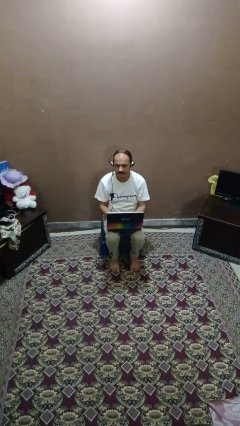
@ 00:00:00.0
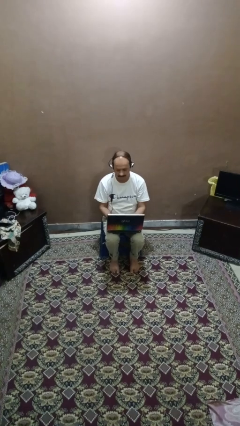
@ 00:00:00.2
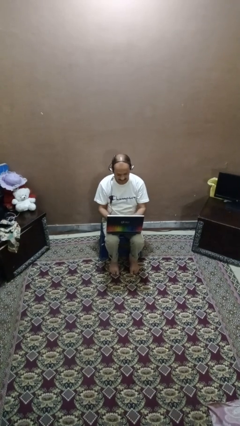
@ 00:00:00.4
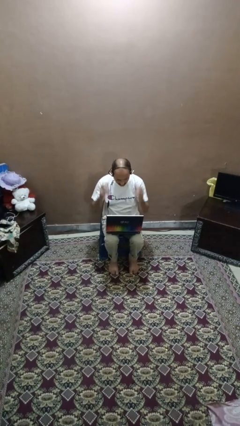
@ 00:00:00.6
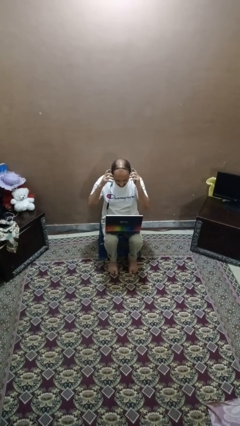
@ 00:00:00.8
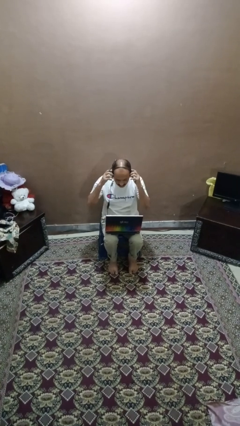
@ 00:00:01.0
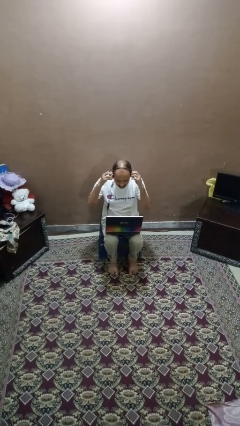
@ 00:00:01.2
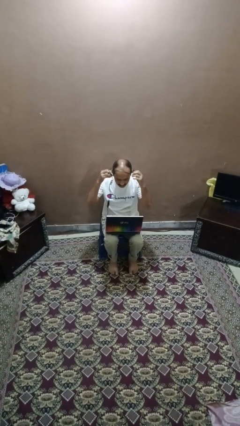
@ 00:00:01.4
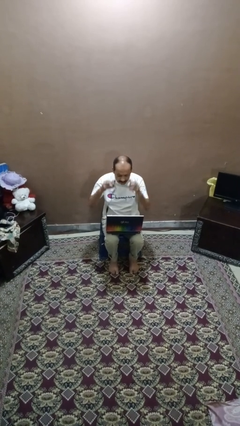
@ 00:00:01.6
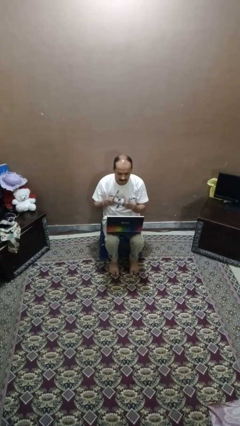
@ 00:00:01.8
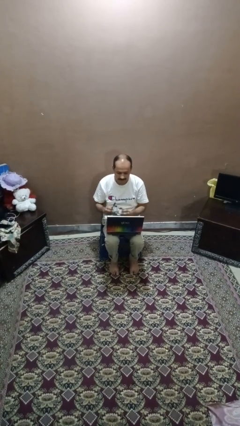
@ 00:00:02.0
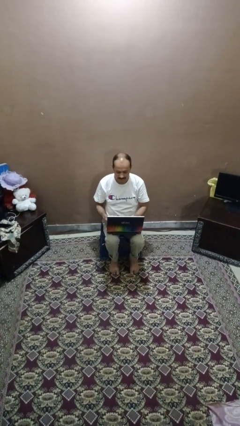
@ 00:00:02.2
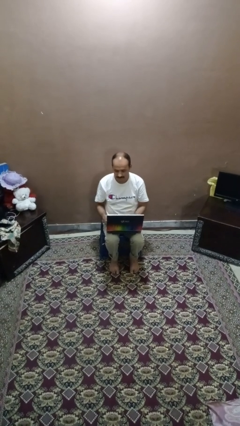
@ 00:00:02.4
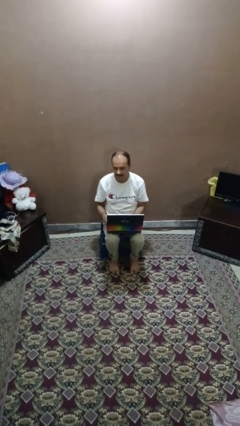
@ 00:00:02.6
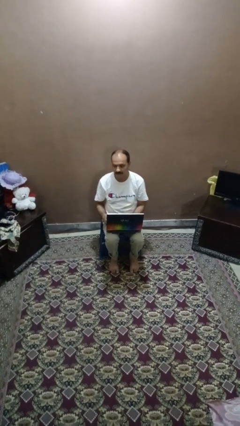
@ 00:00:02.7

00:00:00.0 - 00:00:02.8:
person takes off headphones

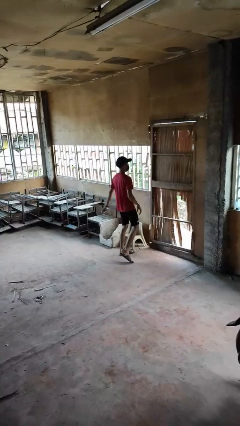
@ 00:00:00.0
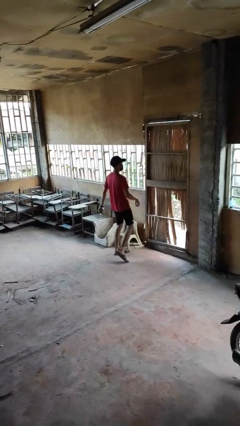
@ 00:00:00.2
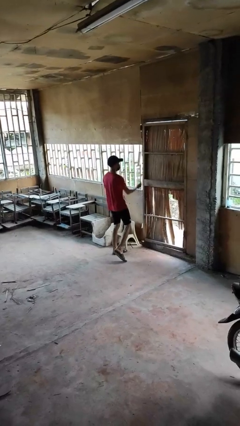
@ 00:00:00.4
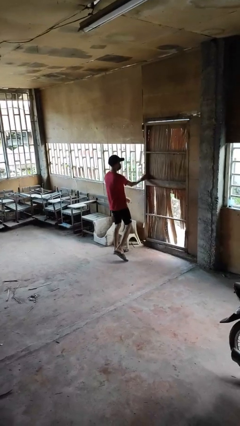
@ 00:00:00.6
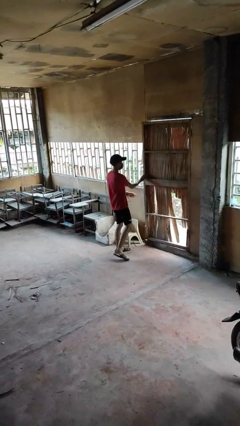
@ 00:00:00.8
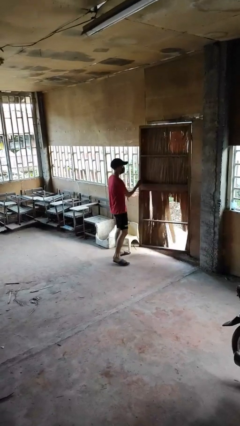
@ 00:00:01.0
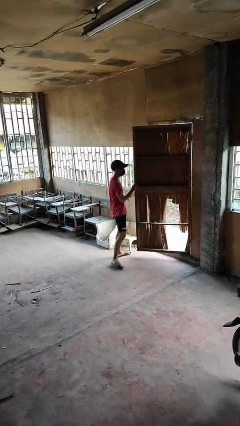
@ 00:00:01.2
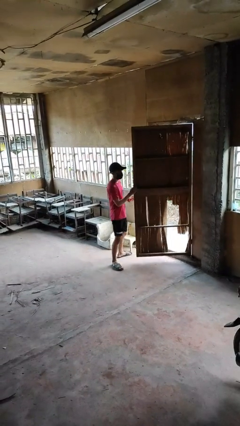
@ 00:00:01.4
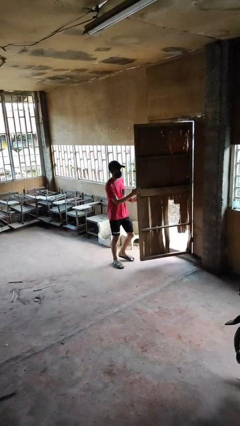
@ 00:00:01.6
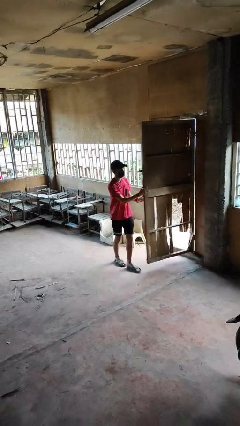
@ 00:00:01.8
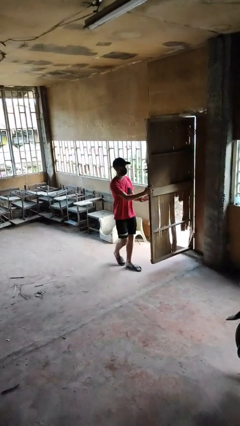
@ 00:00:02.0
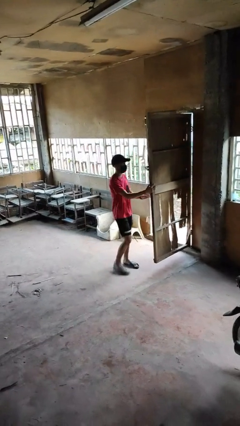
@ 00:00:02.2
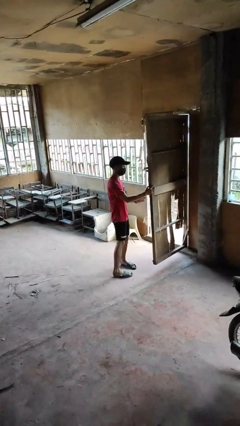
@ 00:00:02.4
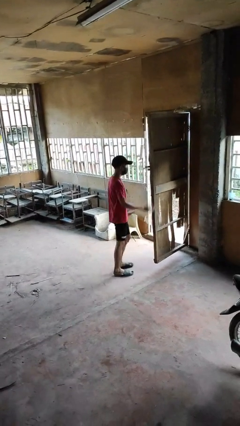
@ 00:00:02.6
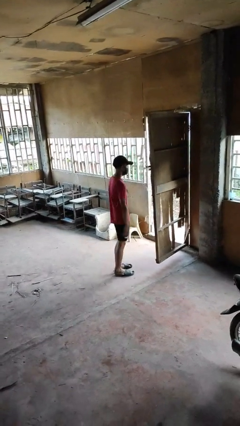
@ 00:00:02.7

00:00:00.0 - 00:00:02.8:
person opens facility door

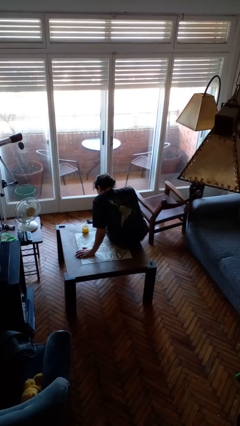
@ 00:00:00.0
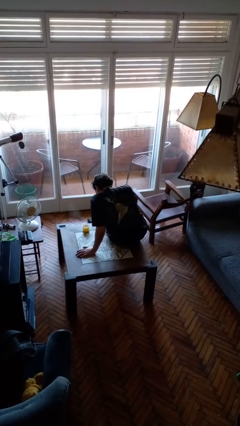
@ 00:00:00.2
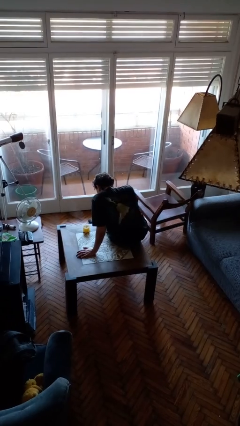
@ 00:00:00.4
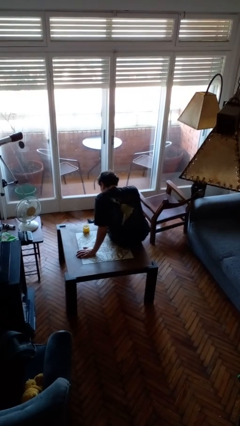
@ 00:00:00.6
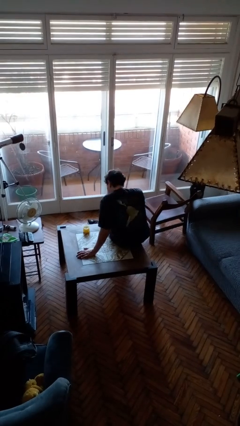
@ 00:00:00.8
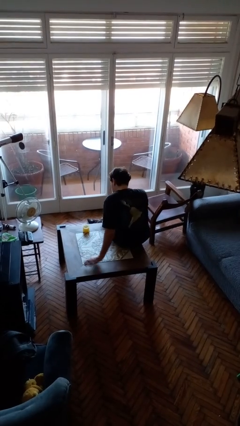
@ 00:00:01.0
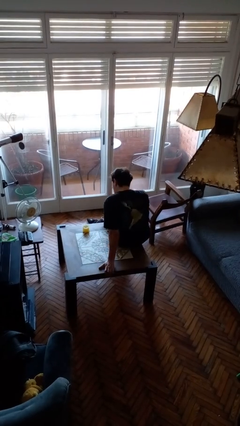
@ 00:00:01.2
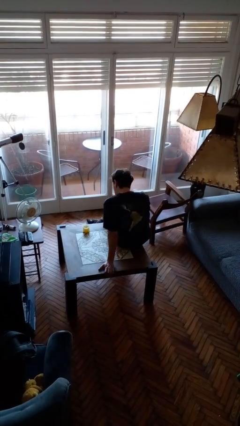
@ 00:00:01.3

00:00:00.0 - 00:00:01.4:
person extinguishes candle

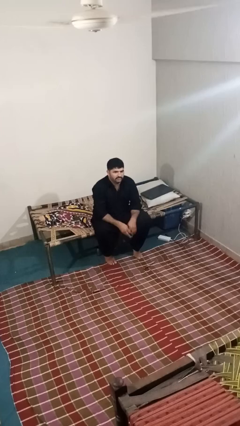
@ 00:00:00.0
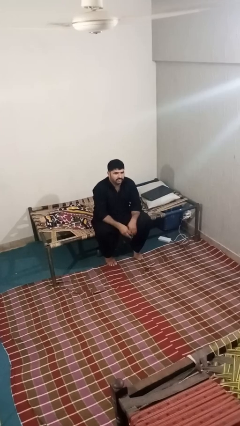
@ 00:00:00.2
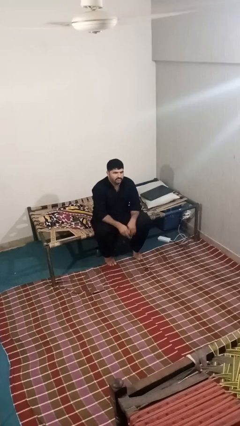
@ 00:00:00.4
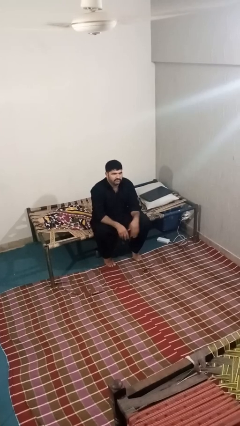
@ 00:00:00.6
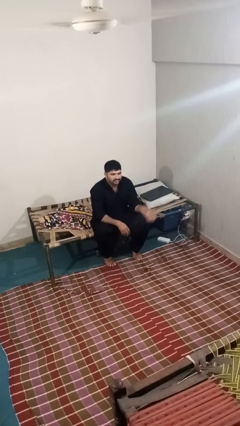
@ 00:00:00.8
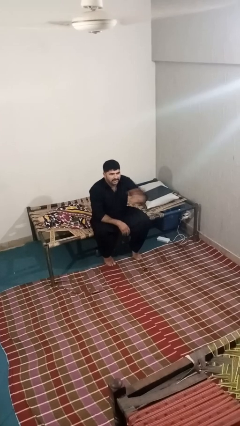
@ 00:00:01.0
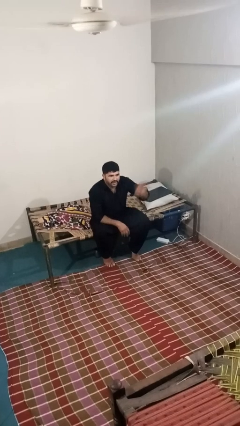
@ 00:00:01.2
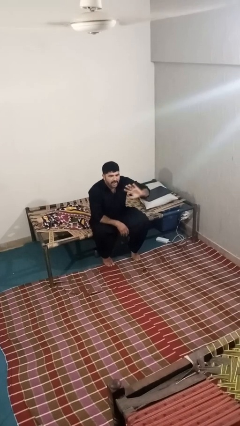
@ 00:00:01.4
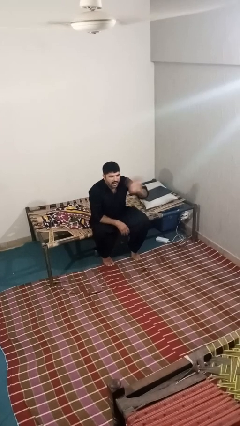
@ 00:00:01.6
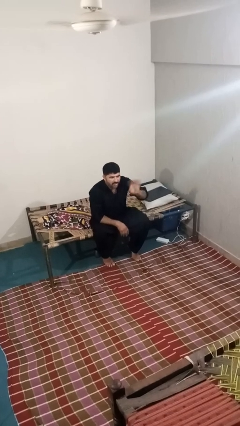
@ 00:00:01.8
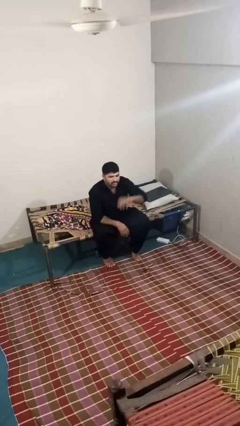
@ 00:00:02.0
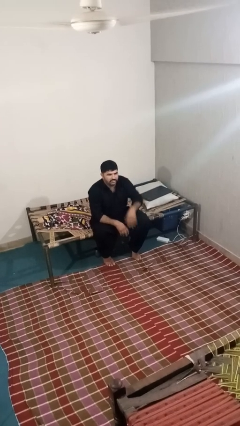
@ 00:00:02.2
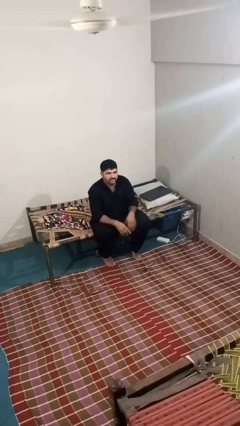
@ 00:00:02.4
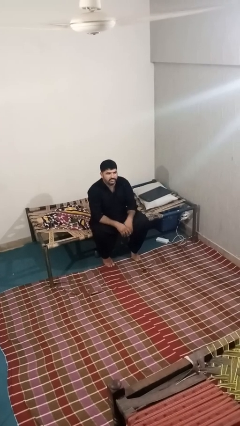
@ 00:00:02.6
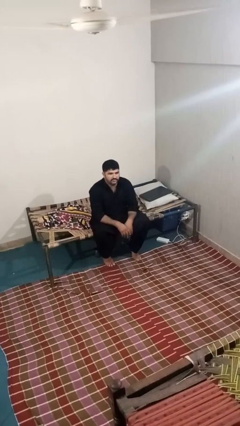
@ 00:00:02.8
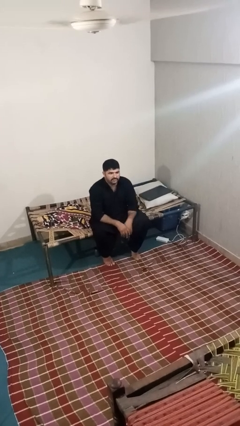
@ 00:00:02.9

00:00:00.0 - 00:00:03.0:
person waves at person

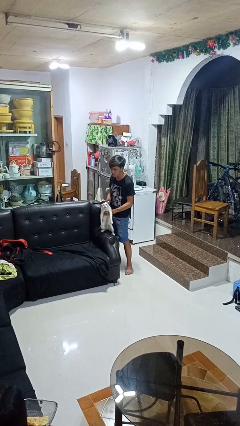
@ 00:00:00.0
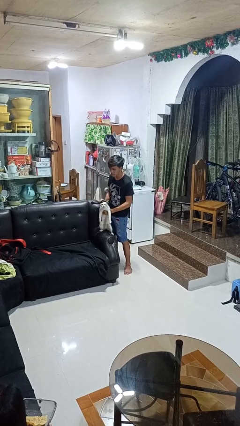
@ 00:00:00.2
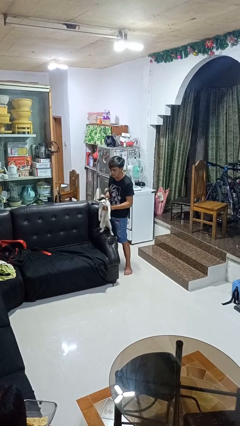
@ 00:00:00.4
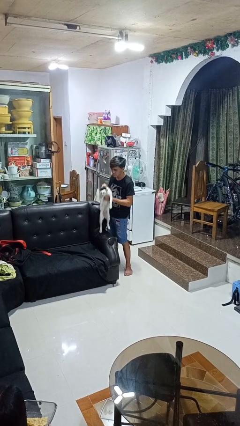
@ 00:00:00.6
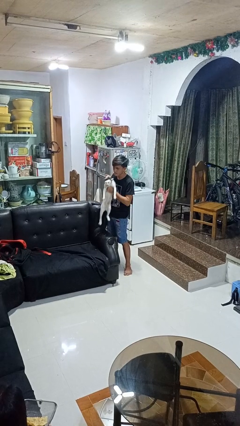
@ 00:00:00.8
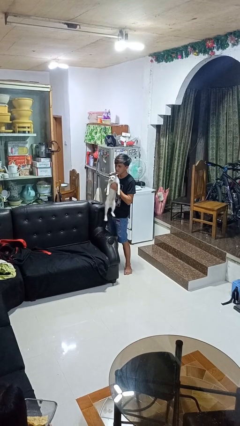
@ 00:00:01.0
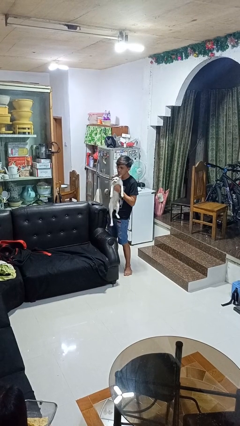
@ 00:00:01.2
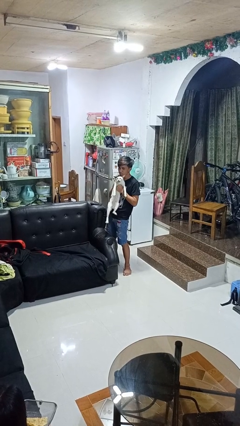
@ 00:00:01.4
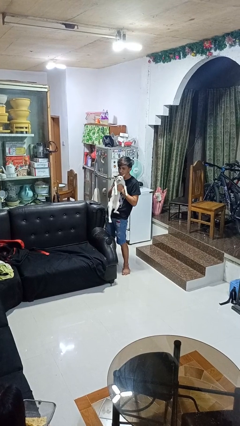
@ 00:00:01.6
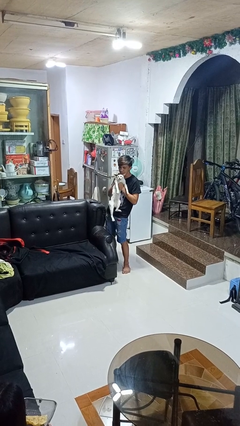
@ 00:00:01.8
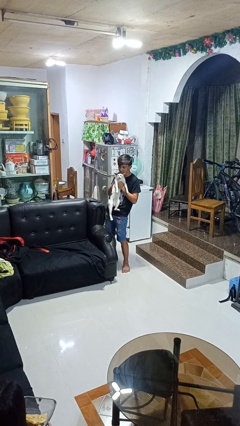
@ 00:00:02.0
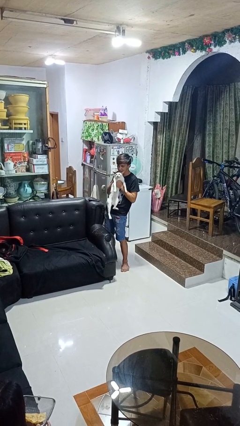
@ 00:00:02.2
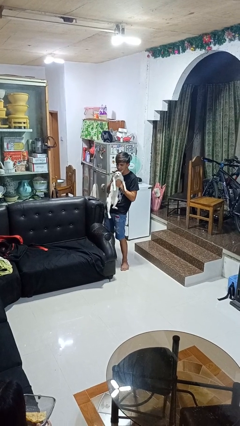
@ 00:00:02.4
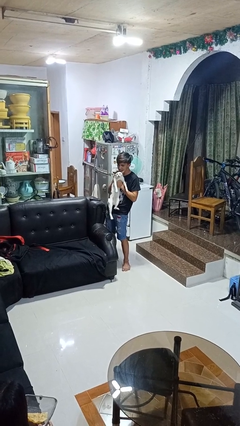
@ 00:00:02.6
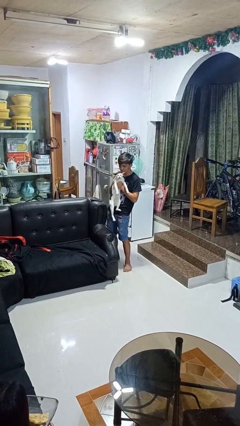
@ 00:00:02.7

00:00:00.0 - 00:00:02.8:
person hugs cat

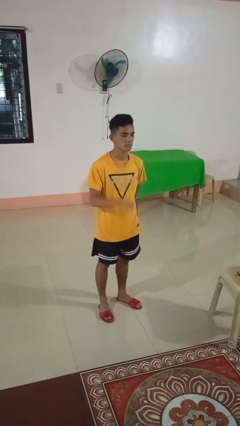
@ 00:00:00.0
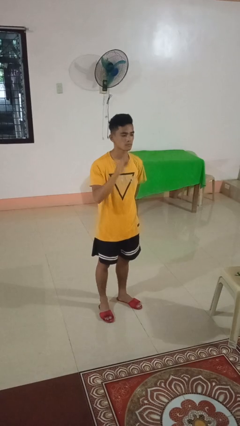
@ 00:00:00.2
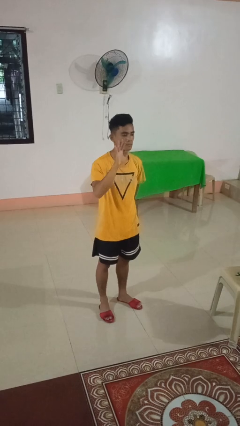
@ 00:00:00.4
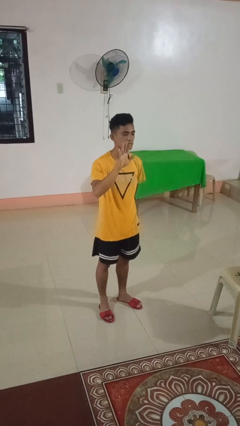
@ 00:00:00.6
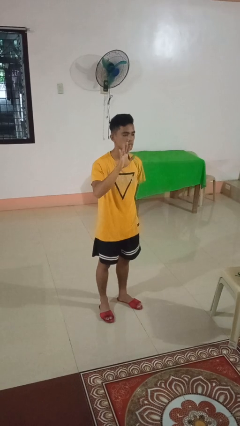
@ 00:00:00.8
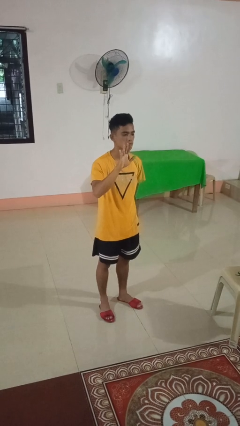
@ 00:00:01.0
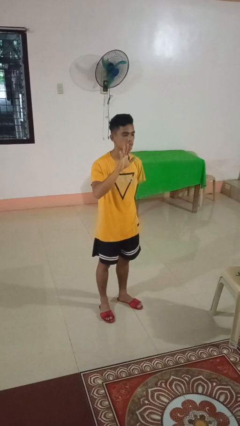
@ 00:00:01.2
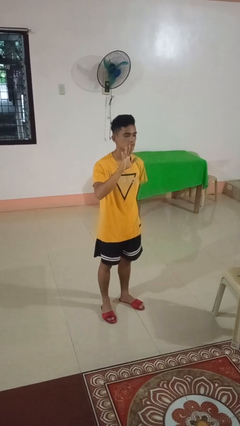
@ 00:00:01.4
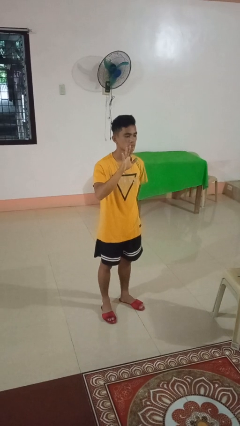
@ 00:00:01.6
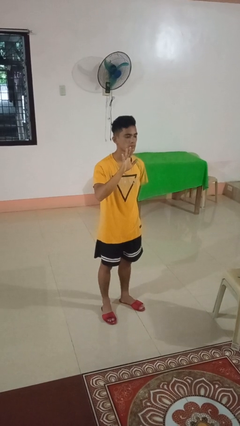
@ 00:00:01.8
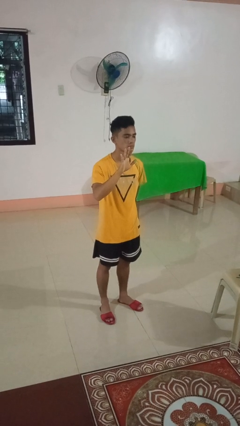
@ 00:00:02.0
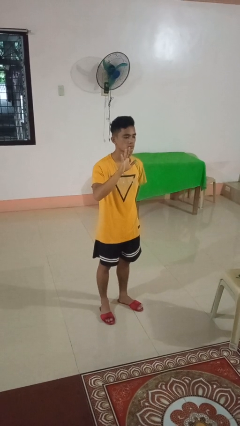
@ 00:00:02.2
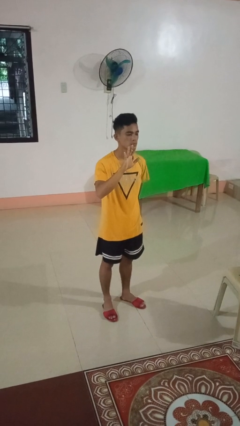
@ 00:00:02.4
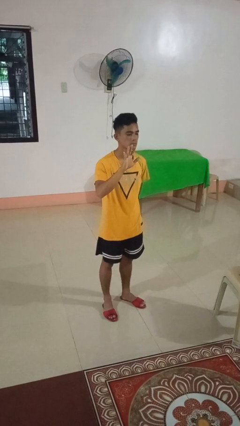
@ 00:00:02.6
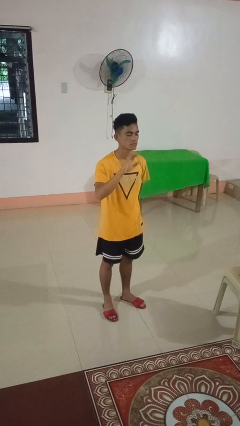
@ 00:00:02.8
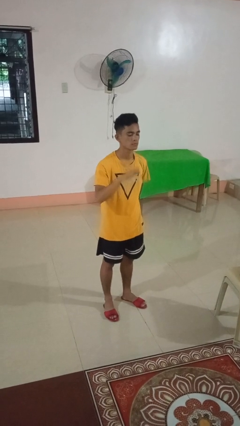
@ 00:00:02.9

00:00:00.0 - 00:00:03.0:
person gestures number five

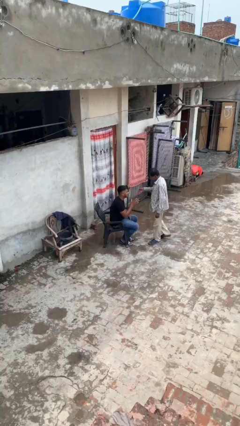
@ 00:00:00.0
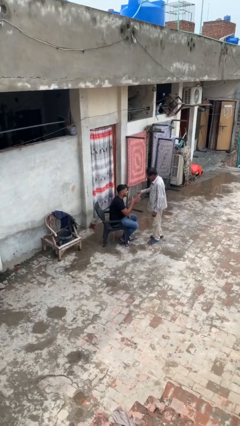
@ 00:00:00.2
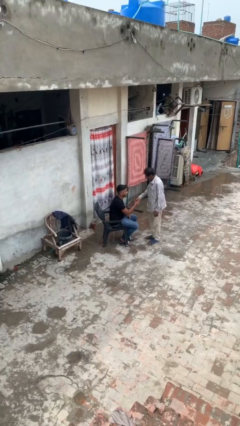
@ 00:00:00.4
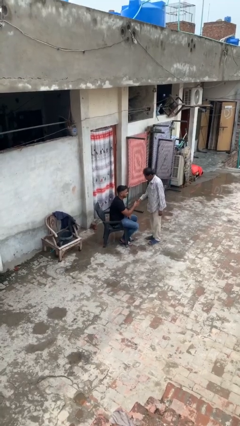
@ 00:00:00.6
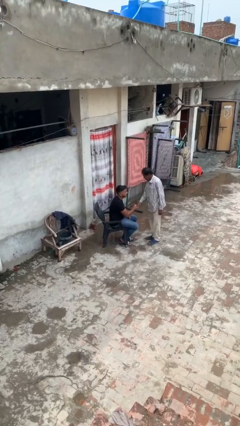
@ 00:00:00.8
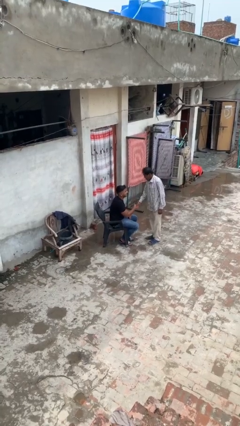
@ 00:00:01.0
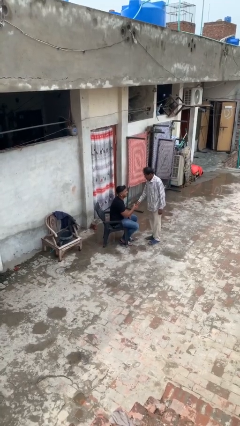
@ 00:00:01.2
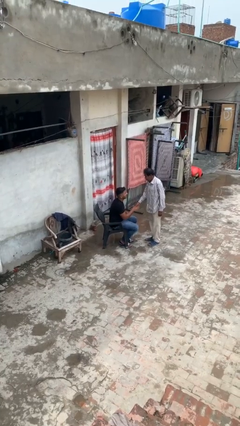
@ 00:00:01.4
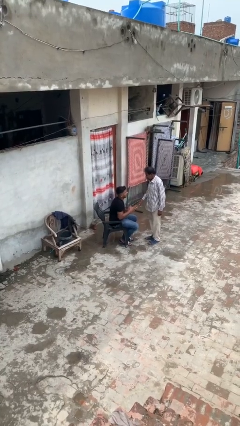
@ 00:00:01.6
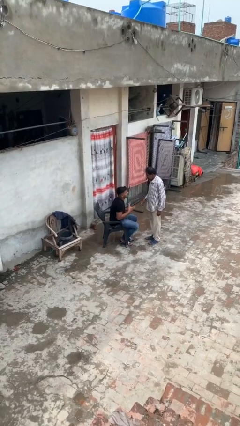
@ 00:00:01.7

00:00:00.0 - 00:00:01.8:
person shakes hand
